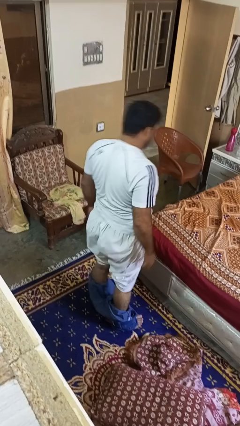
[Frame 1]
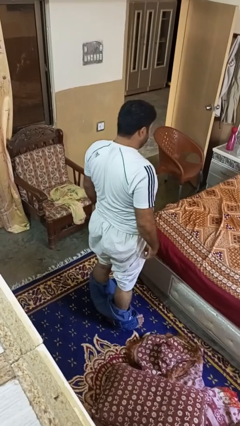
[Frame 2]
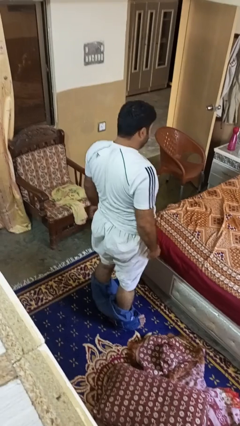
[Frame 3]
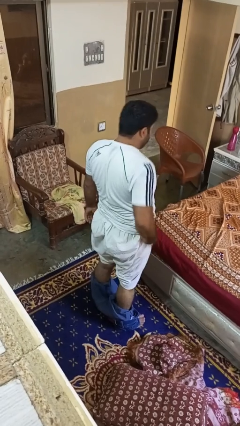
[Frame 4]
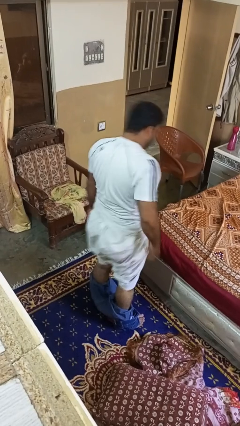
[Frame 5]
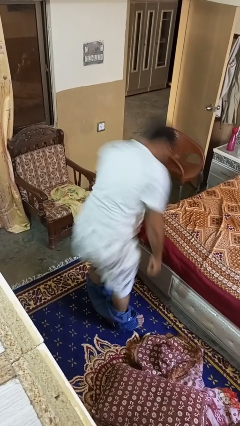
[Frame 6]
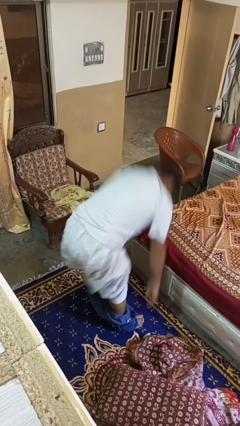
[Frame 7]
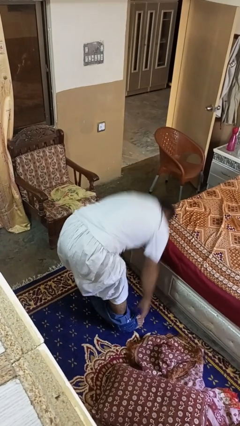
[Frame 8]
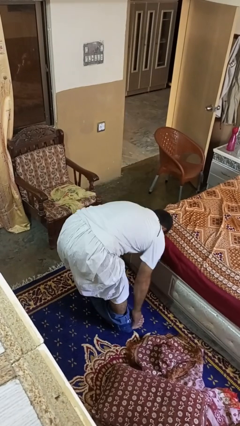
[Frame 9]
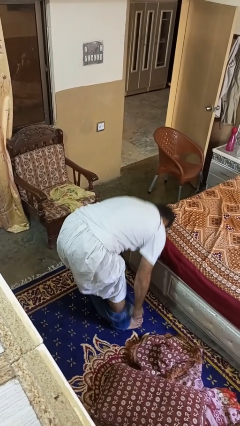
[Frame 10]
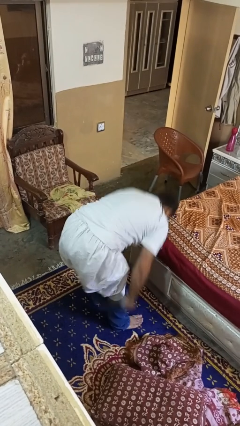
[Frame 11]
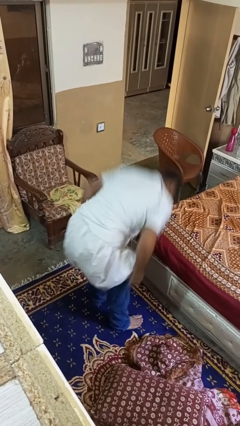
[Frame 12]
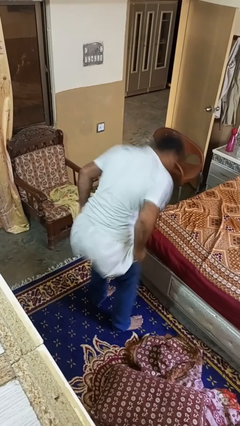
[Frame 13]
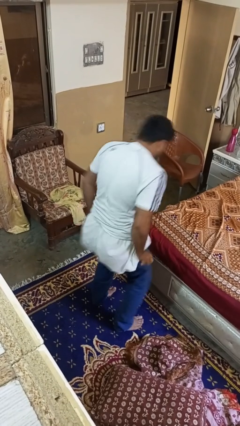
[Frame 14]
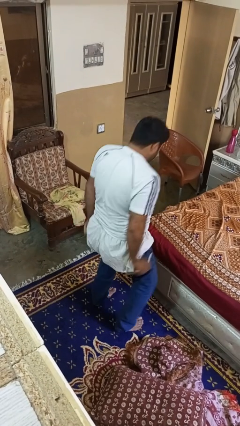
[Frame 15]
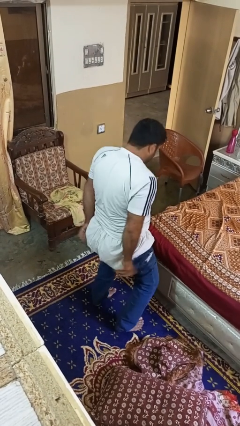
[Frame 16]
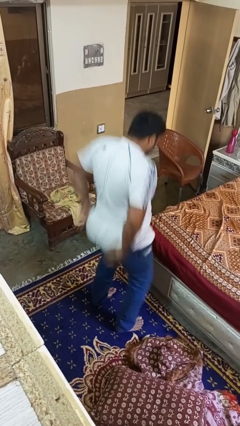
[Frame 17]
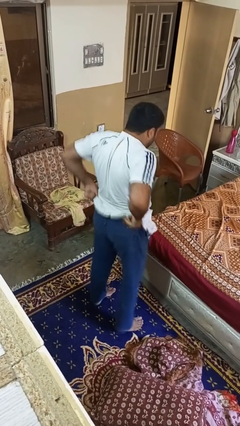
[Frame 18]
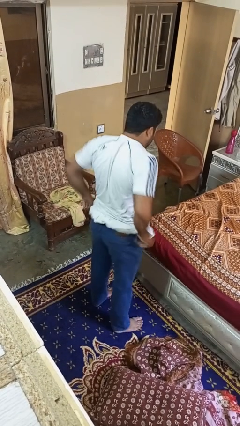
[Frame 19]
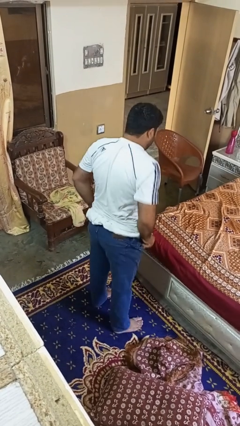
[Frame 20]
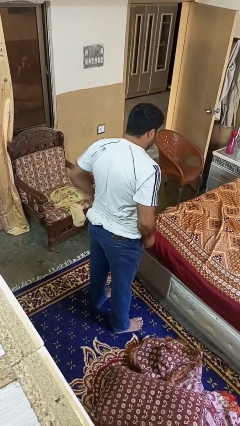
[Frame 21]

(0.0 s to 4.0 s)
person puts on pants

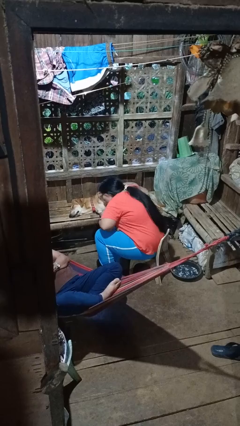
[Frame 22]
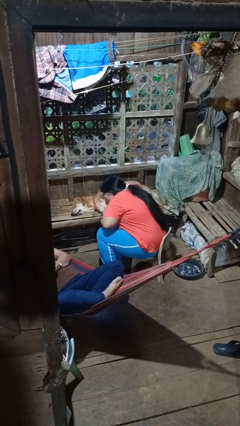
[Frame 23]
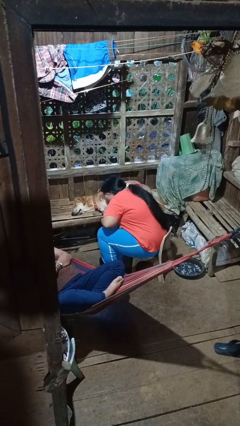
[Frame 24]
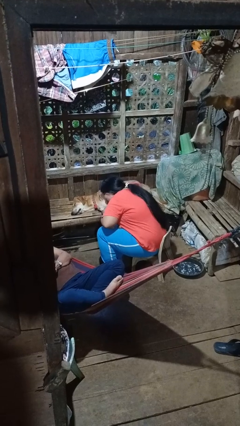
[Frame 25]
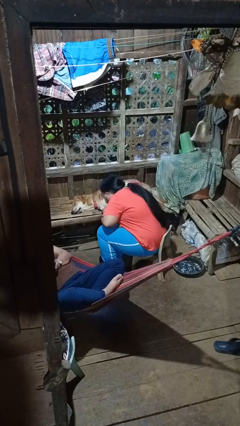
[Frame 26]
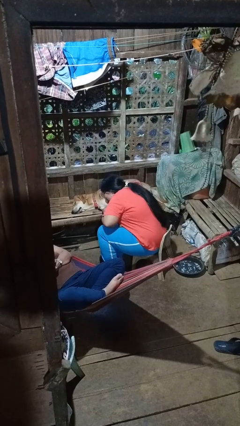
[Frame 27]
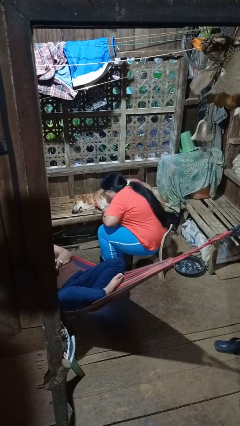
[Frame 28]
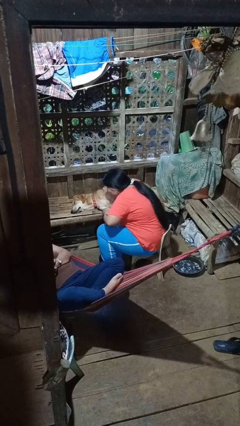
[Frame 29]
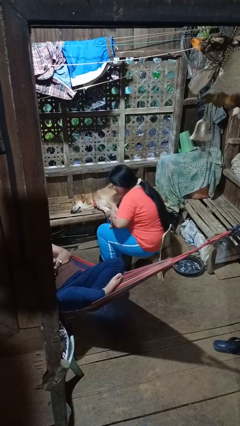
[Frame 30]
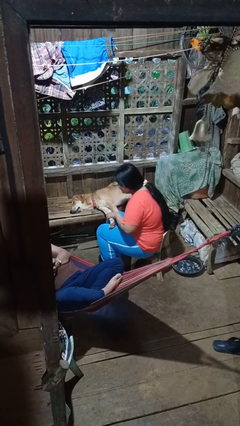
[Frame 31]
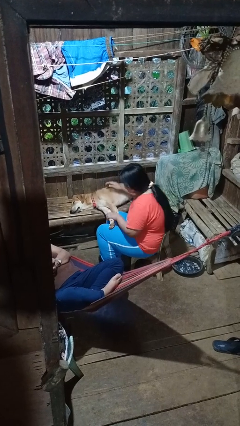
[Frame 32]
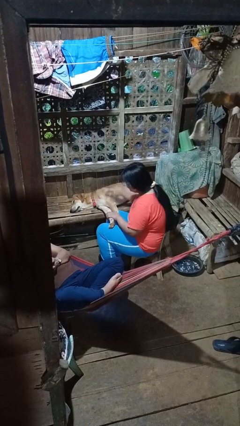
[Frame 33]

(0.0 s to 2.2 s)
person hugs dog

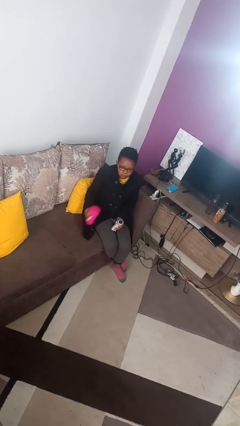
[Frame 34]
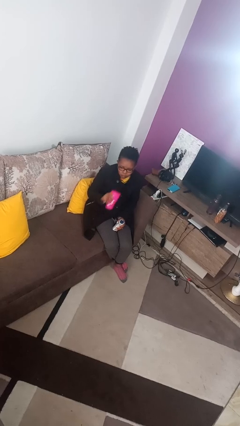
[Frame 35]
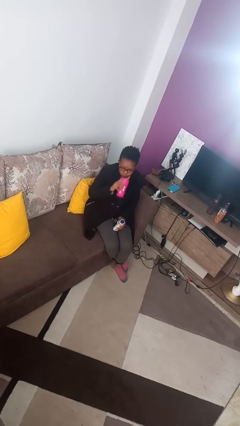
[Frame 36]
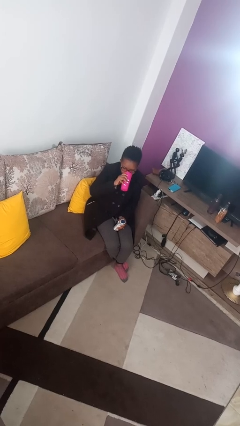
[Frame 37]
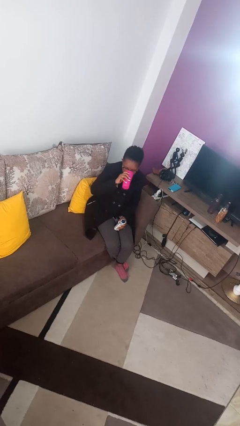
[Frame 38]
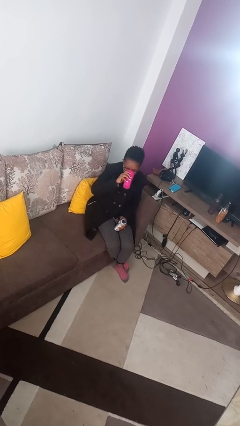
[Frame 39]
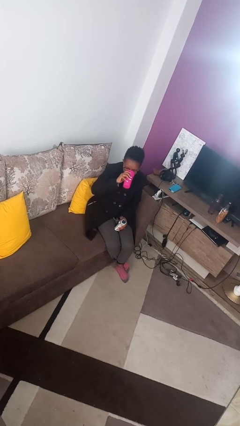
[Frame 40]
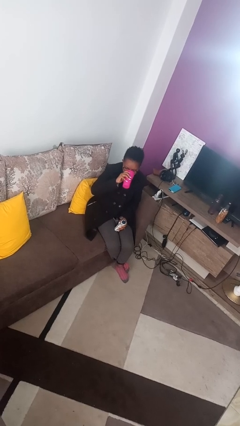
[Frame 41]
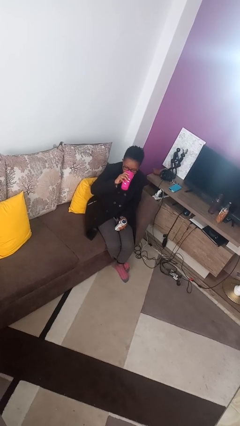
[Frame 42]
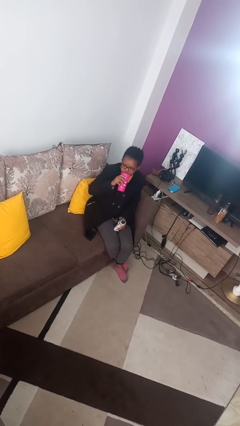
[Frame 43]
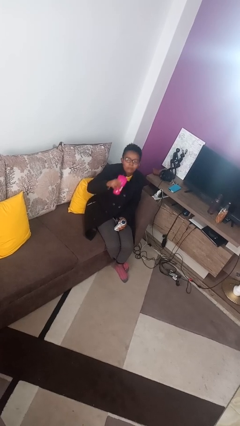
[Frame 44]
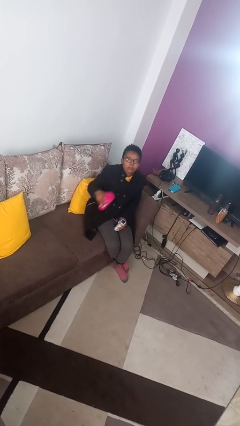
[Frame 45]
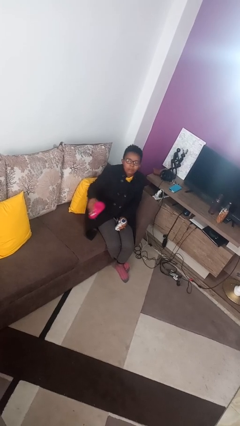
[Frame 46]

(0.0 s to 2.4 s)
person drinks from cup

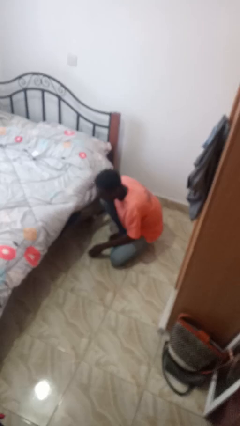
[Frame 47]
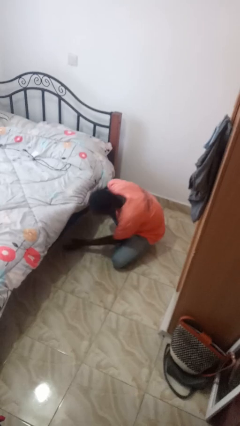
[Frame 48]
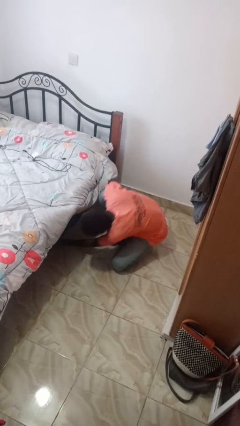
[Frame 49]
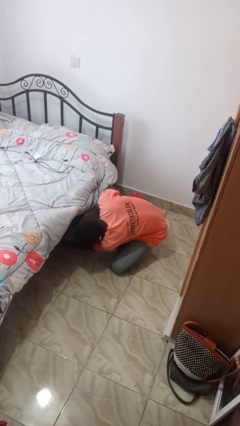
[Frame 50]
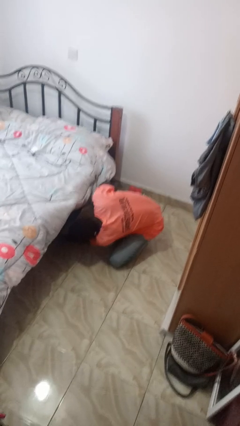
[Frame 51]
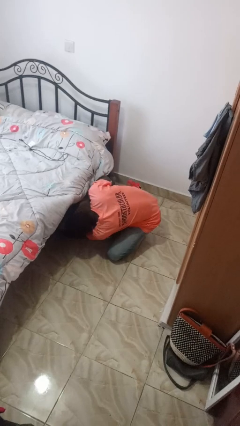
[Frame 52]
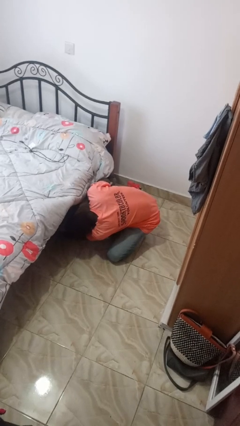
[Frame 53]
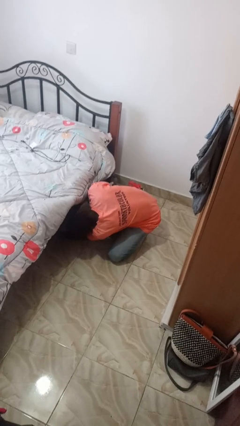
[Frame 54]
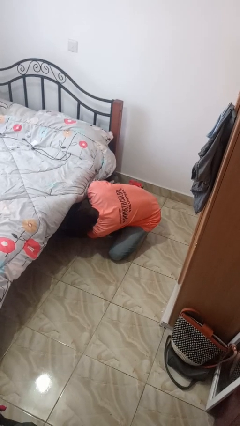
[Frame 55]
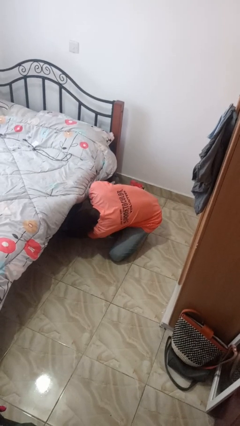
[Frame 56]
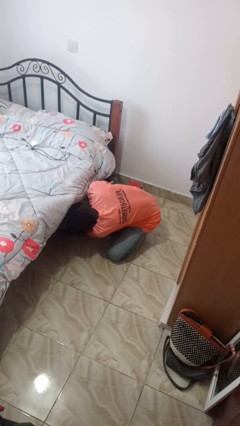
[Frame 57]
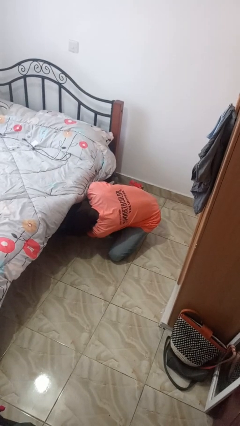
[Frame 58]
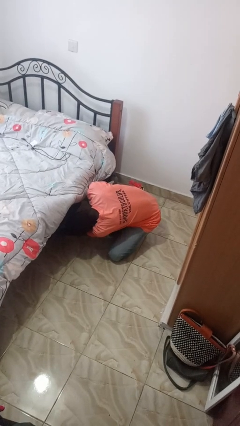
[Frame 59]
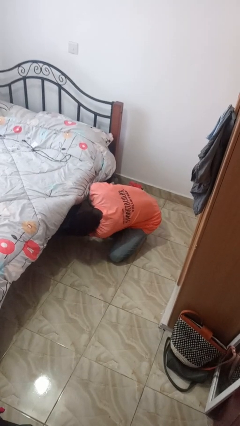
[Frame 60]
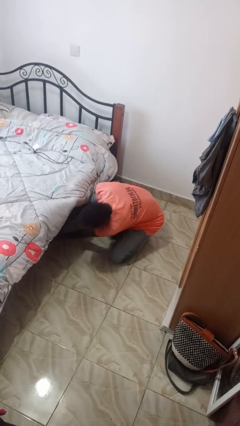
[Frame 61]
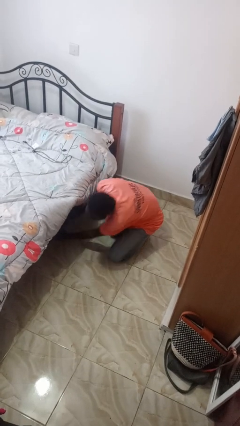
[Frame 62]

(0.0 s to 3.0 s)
person searches under bed

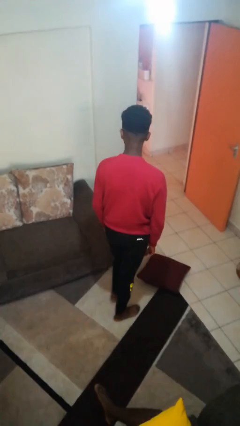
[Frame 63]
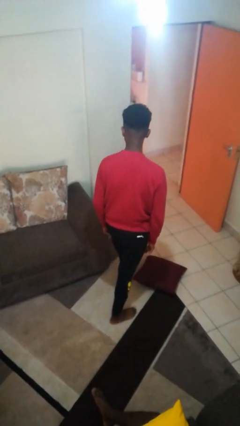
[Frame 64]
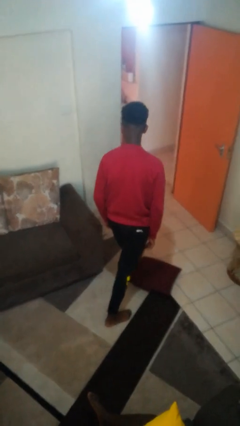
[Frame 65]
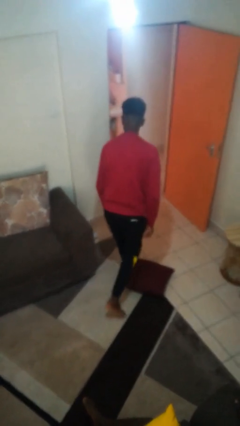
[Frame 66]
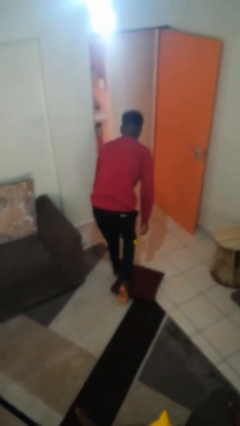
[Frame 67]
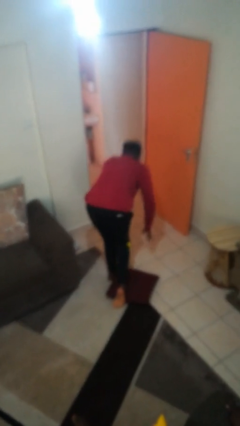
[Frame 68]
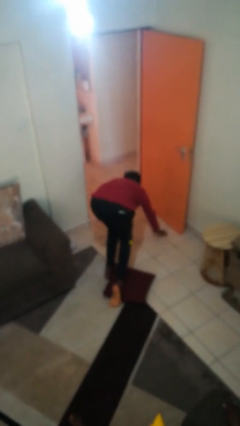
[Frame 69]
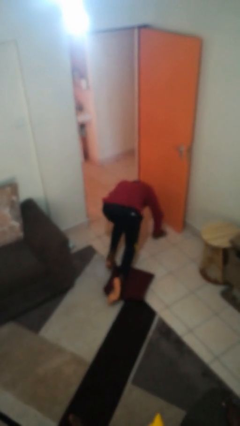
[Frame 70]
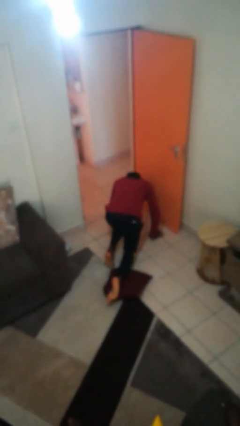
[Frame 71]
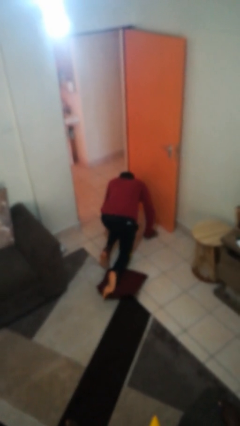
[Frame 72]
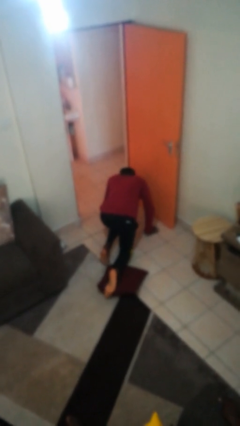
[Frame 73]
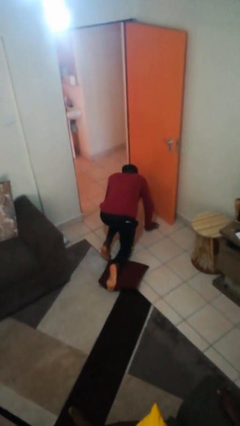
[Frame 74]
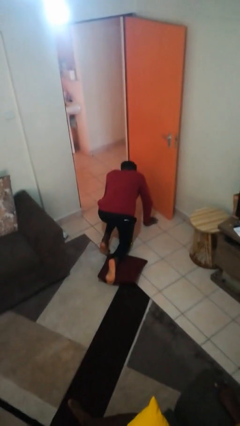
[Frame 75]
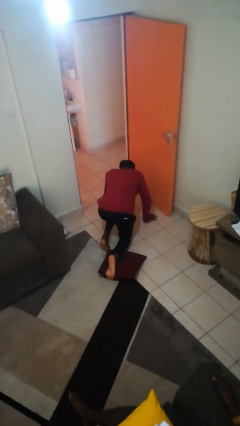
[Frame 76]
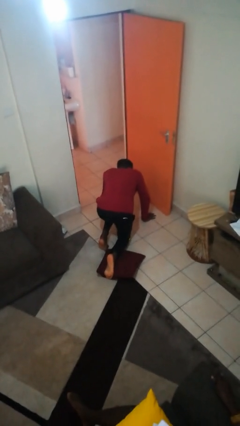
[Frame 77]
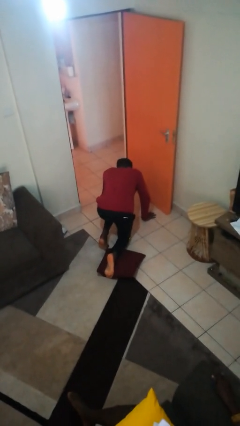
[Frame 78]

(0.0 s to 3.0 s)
person trips on object on floor

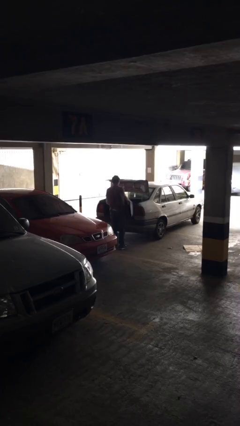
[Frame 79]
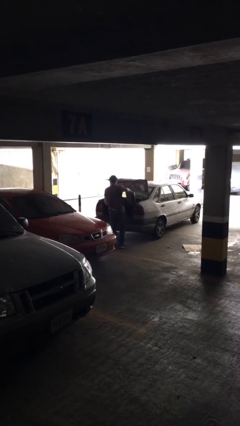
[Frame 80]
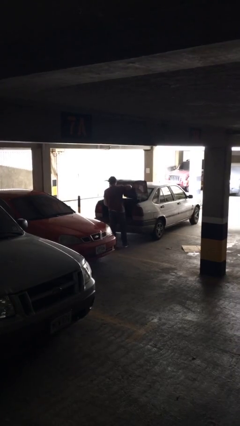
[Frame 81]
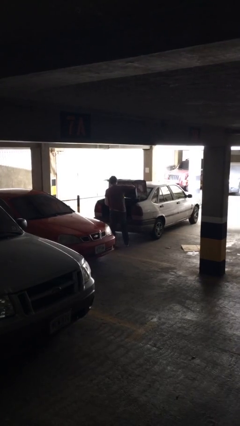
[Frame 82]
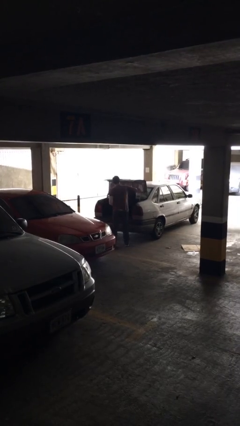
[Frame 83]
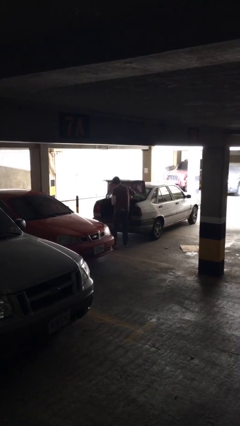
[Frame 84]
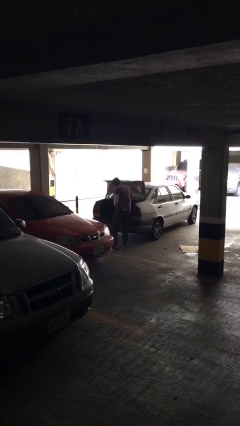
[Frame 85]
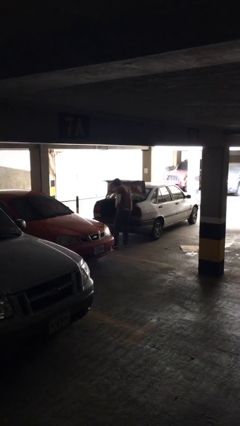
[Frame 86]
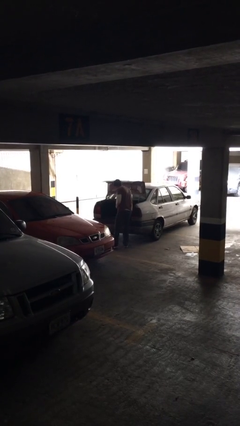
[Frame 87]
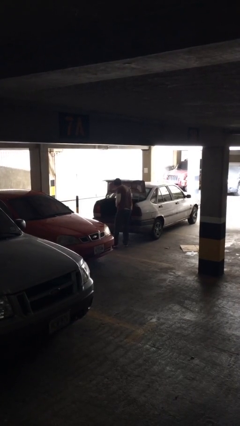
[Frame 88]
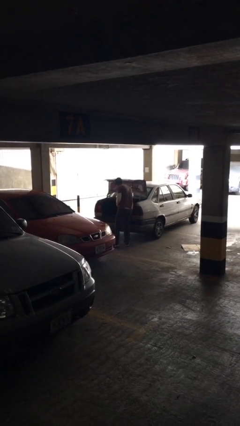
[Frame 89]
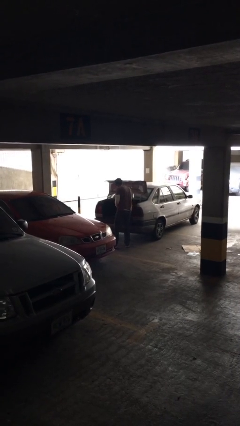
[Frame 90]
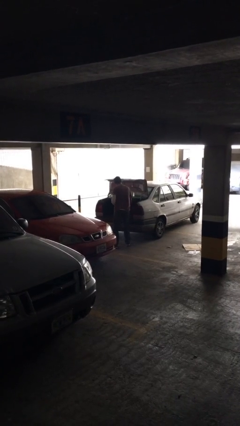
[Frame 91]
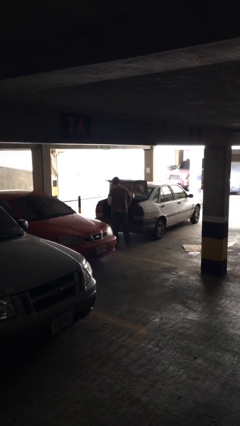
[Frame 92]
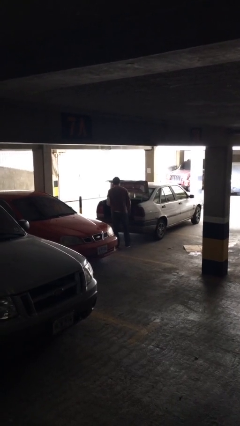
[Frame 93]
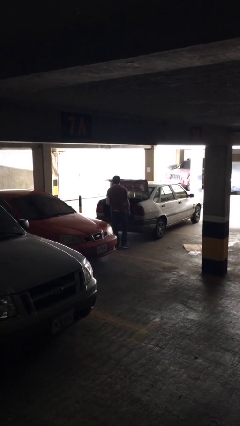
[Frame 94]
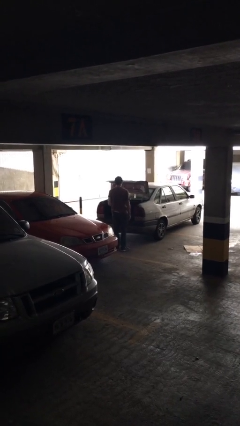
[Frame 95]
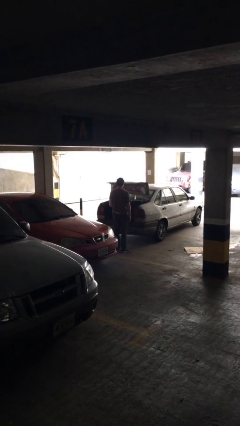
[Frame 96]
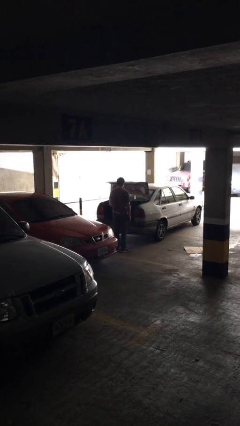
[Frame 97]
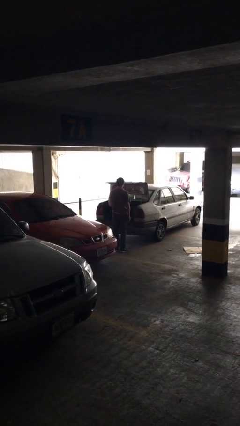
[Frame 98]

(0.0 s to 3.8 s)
person loads car
